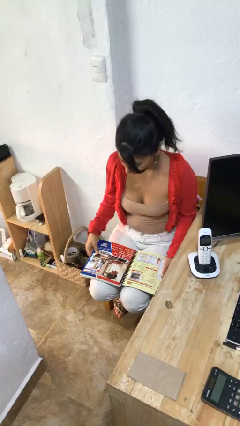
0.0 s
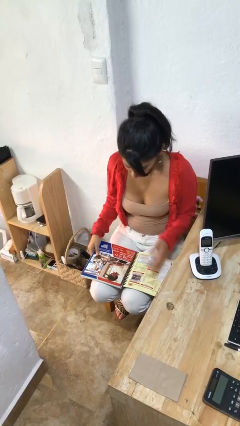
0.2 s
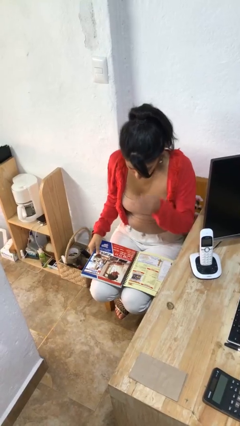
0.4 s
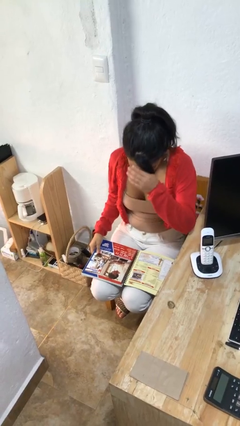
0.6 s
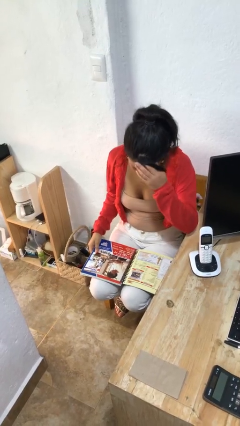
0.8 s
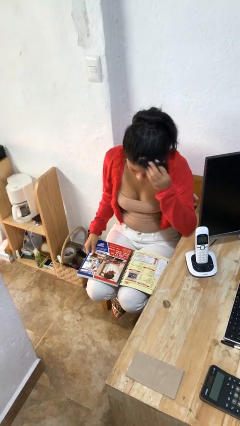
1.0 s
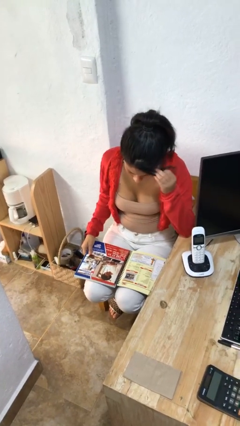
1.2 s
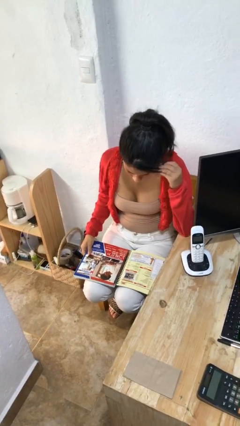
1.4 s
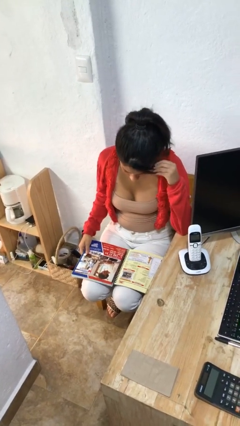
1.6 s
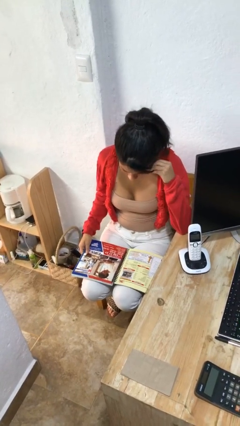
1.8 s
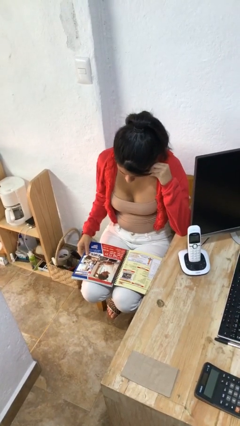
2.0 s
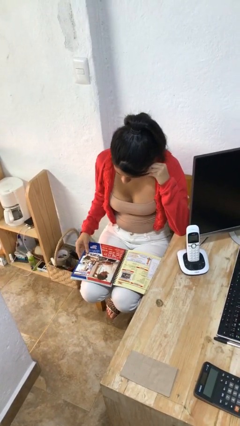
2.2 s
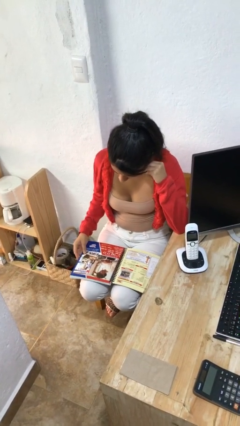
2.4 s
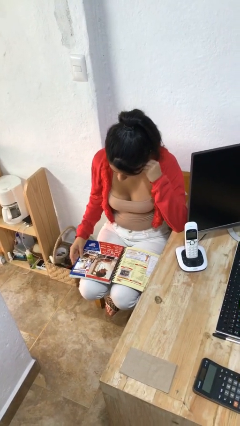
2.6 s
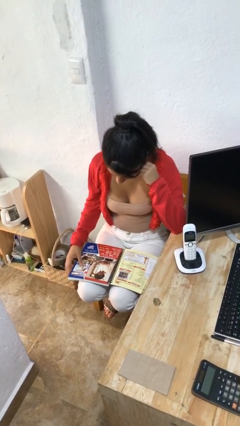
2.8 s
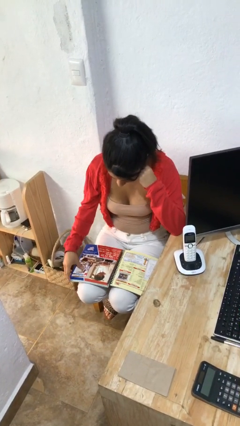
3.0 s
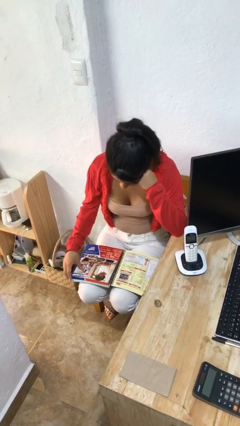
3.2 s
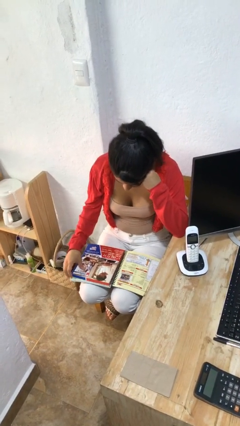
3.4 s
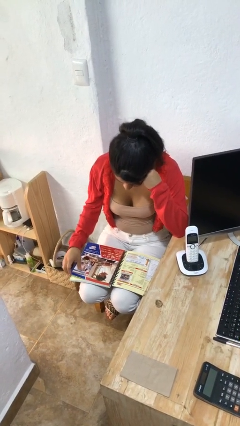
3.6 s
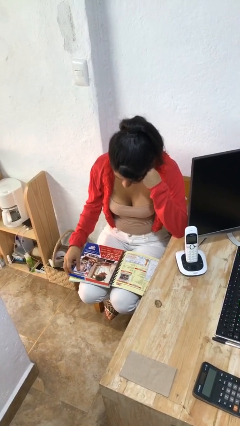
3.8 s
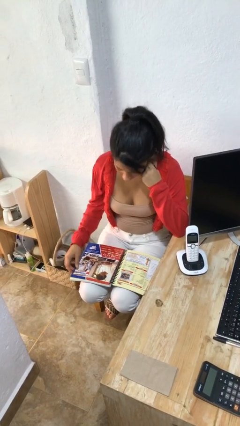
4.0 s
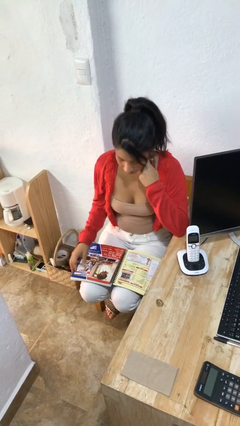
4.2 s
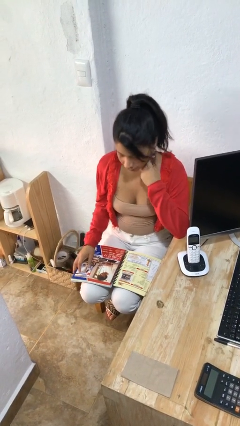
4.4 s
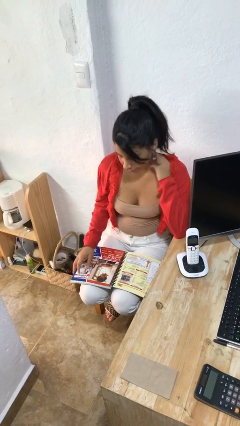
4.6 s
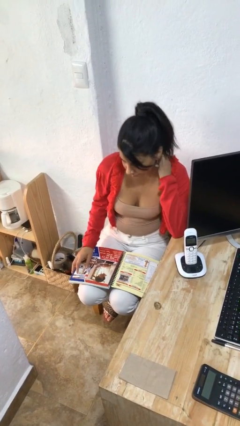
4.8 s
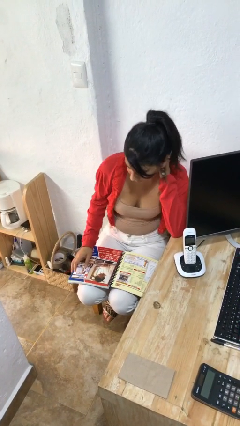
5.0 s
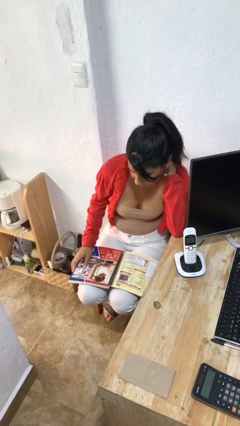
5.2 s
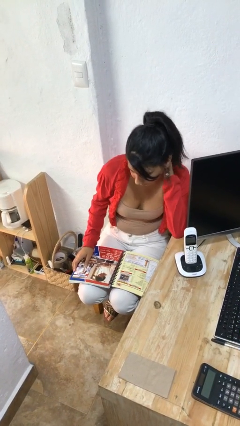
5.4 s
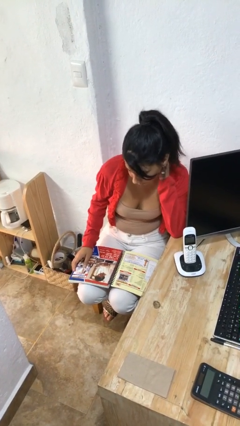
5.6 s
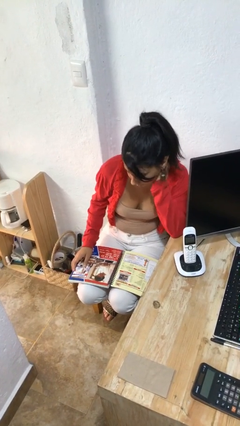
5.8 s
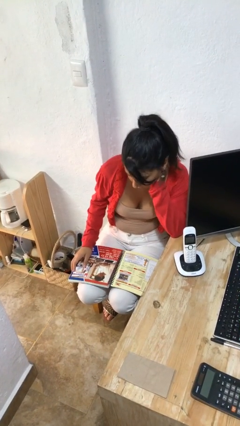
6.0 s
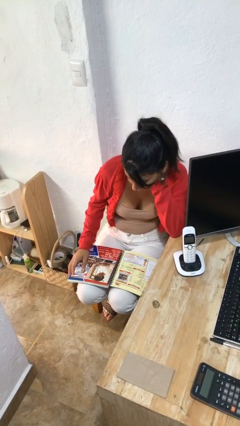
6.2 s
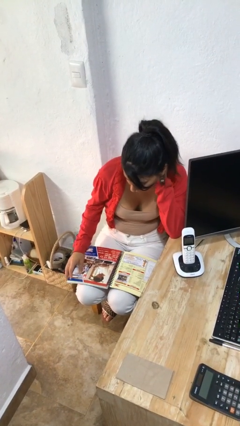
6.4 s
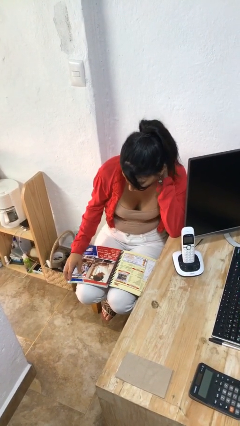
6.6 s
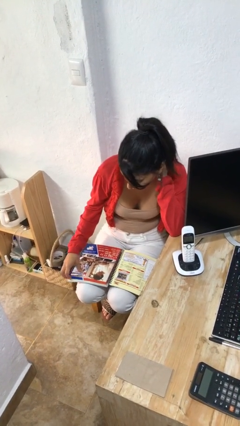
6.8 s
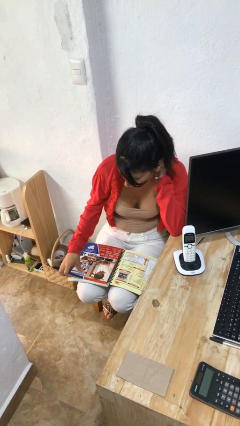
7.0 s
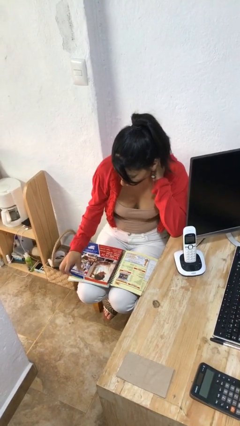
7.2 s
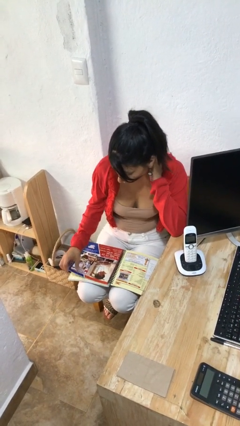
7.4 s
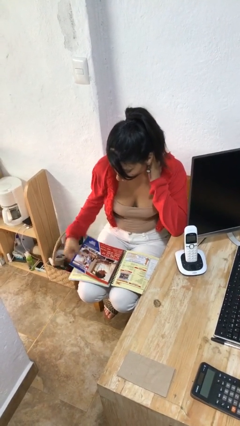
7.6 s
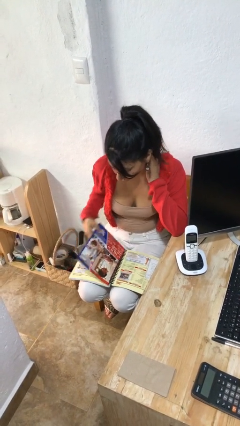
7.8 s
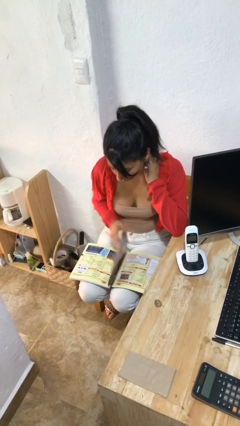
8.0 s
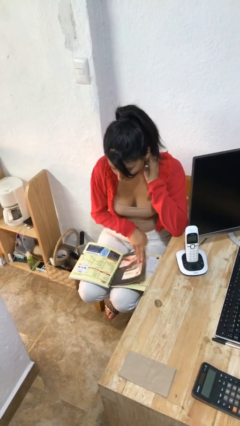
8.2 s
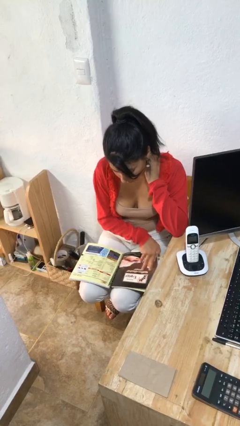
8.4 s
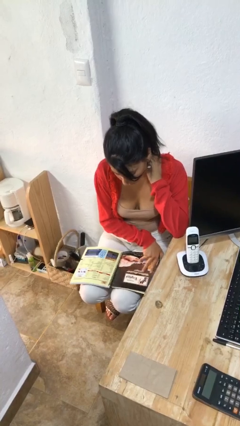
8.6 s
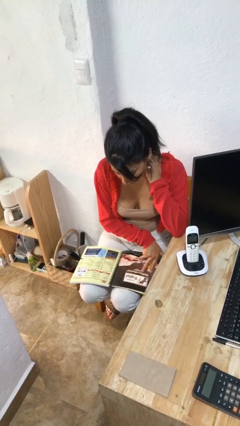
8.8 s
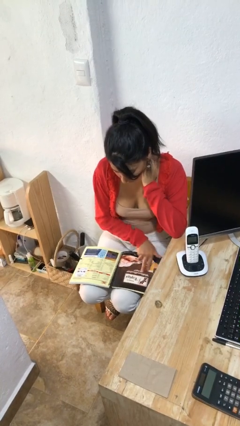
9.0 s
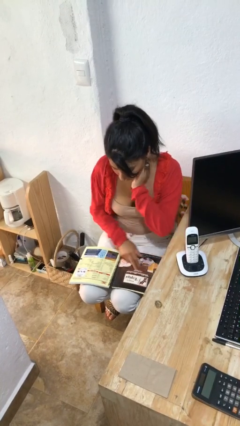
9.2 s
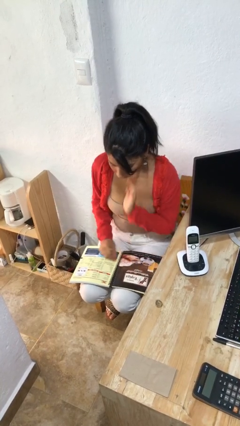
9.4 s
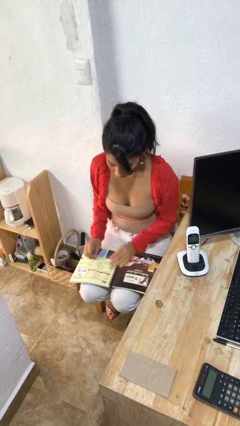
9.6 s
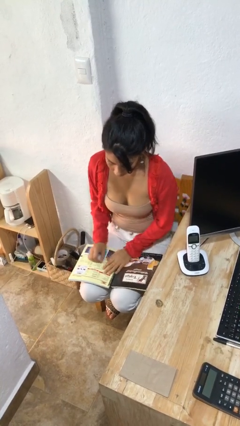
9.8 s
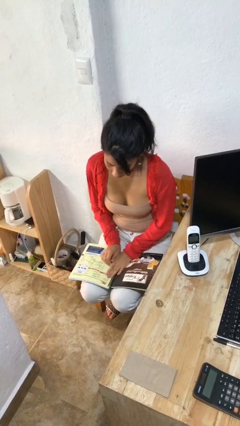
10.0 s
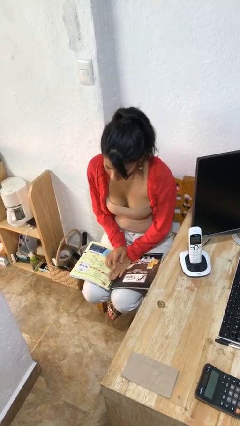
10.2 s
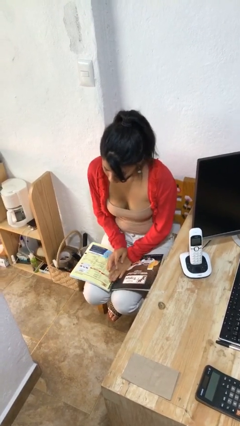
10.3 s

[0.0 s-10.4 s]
person reads document

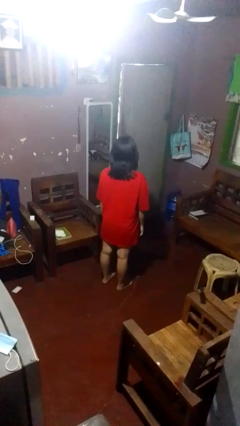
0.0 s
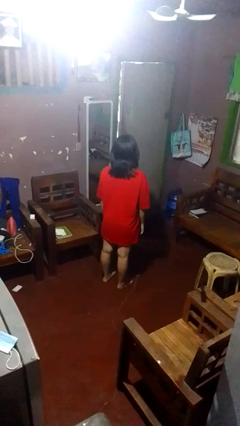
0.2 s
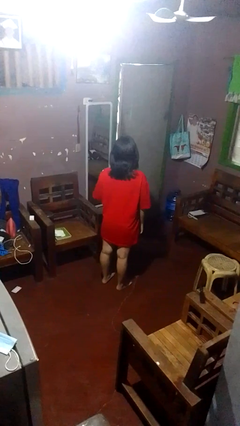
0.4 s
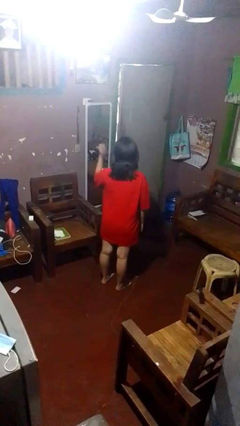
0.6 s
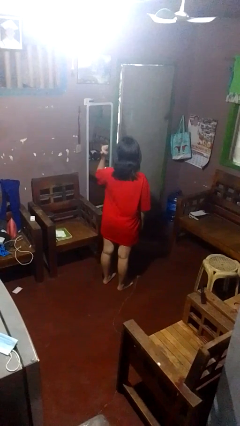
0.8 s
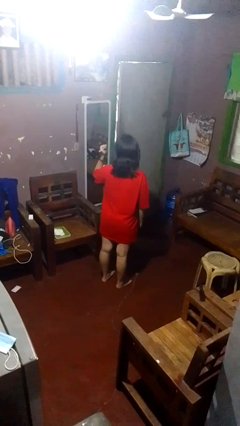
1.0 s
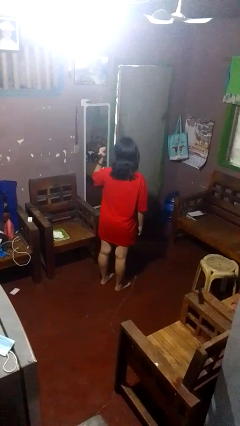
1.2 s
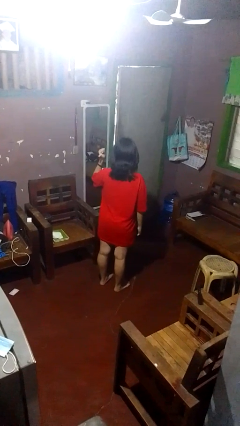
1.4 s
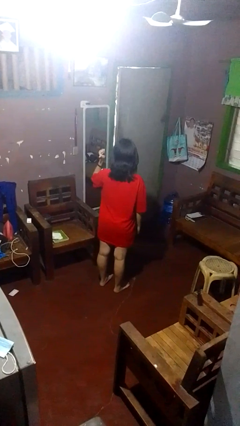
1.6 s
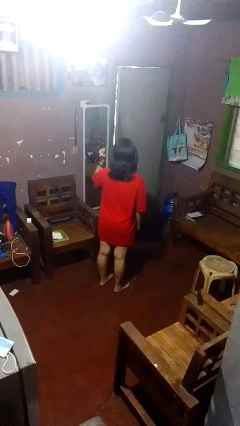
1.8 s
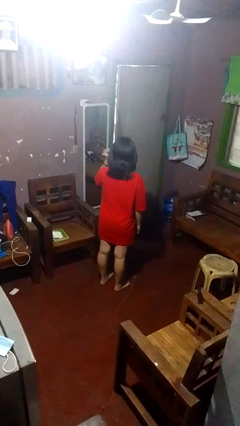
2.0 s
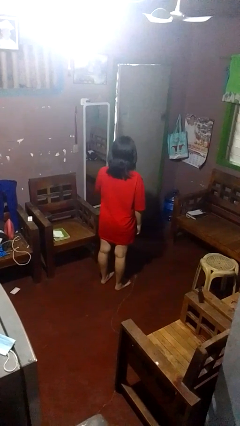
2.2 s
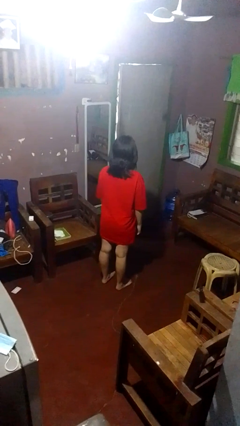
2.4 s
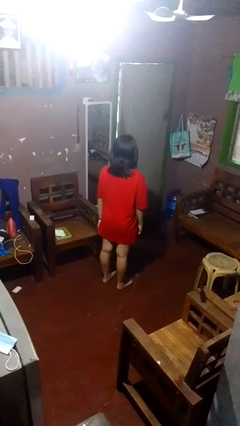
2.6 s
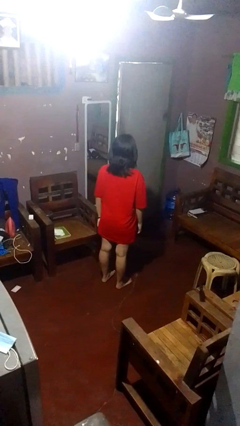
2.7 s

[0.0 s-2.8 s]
person gestures behind me

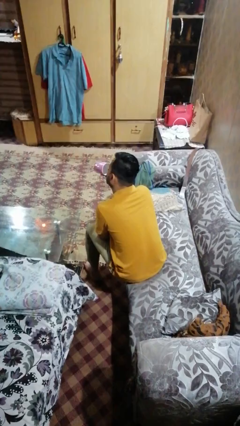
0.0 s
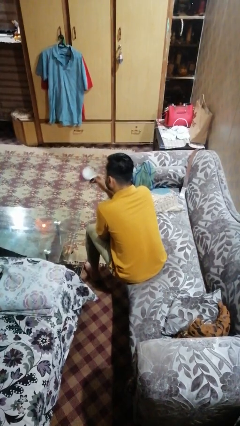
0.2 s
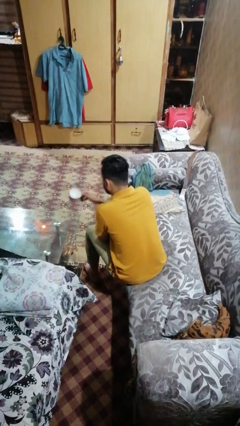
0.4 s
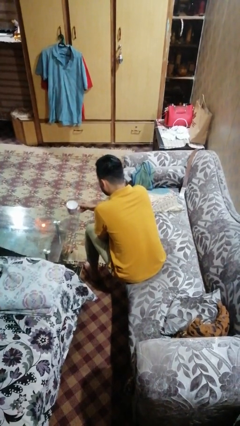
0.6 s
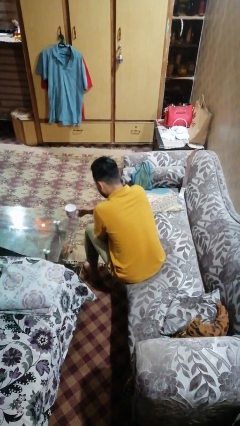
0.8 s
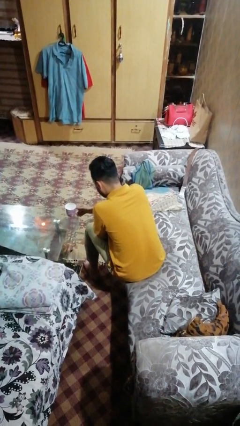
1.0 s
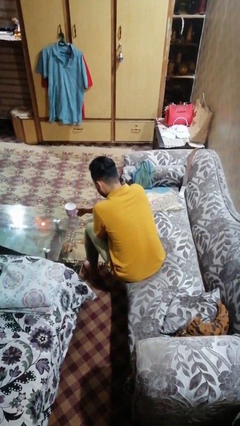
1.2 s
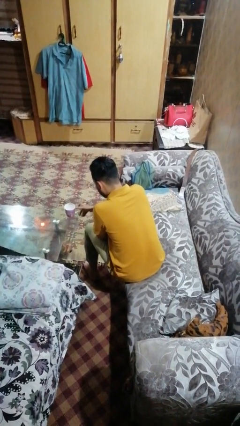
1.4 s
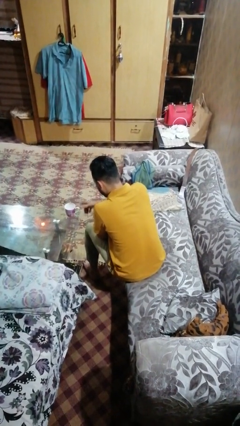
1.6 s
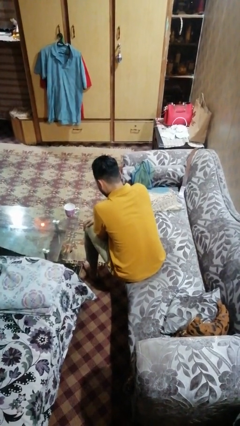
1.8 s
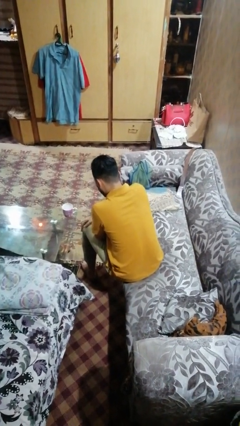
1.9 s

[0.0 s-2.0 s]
person puts down object on table

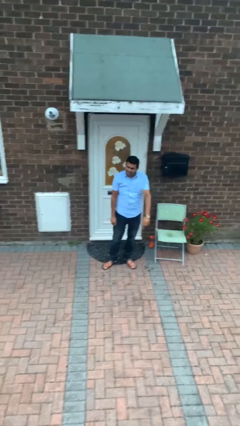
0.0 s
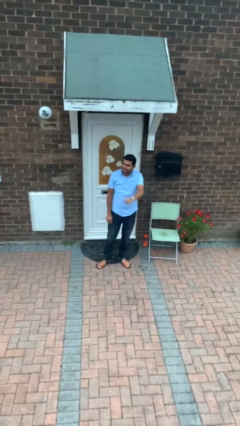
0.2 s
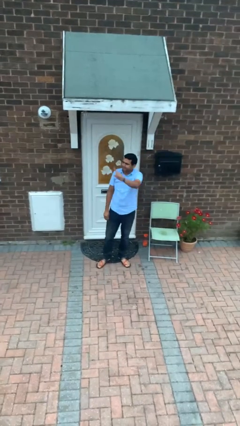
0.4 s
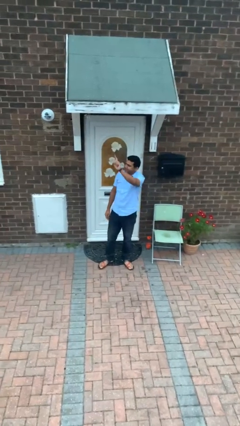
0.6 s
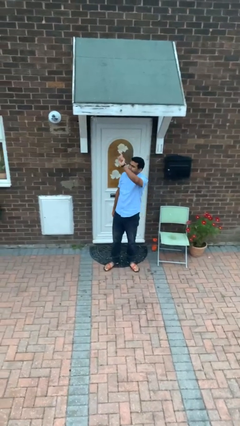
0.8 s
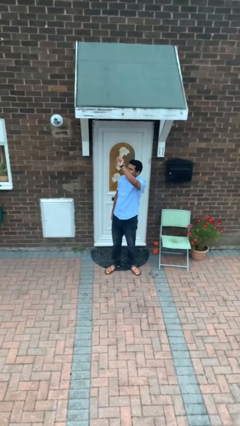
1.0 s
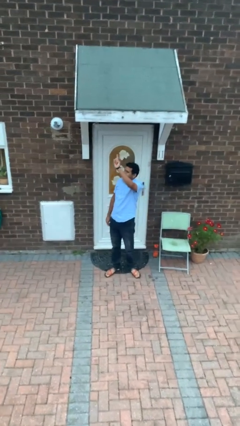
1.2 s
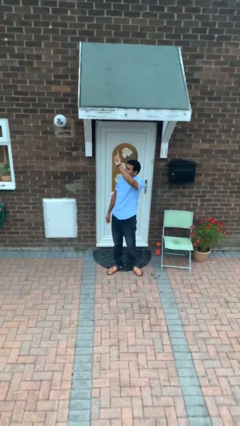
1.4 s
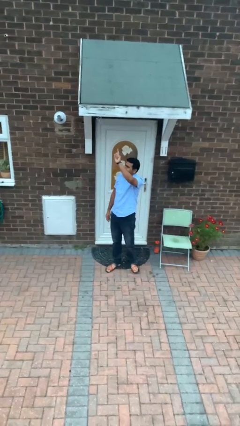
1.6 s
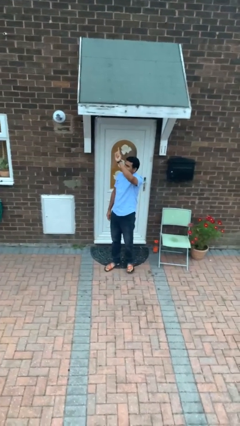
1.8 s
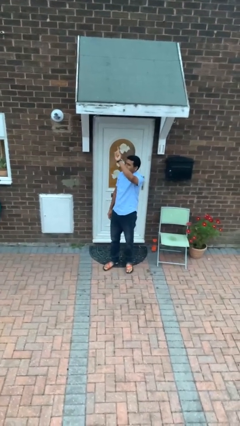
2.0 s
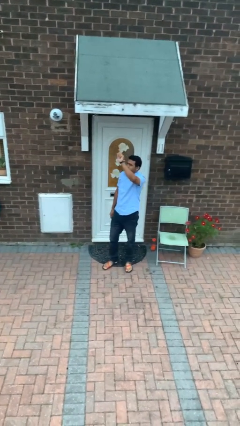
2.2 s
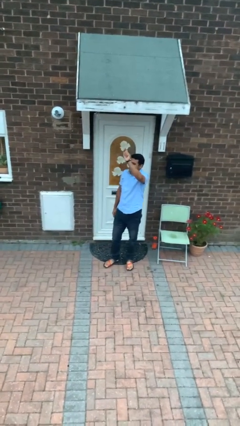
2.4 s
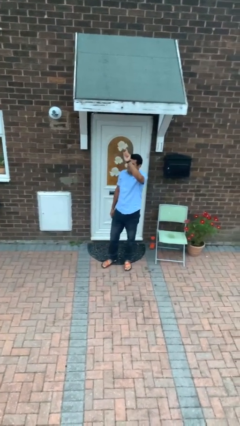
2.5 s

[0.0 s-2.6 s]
person gestures raise hand

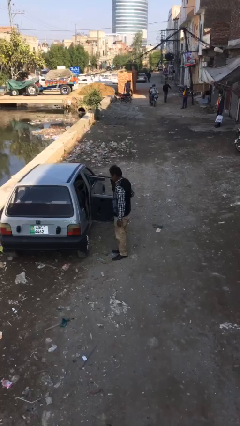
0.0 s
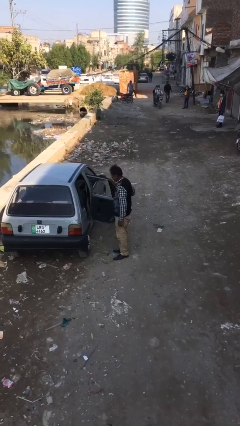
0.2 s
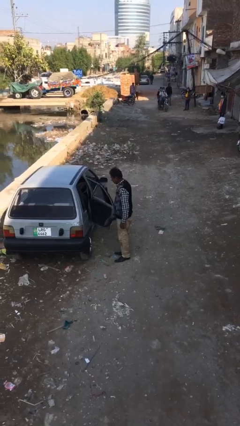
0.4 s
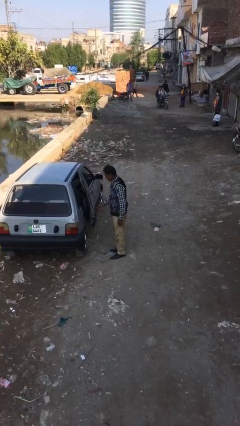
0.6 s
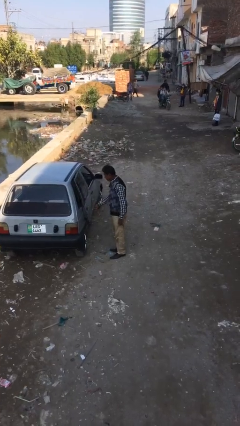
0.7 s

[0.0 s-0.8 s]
person closes car door
